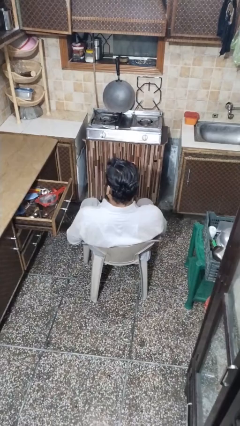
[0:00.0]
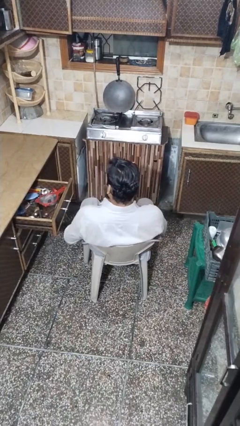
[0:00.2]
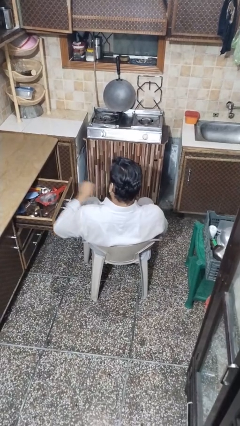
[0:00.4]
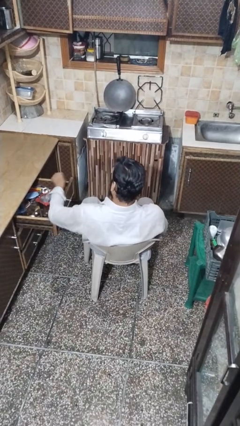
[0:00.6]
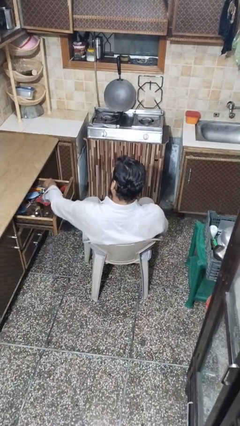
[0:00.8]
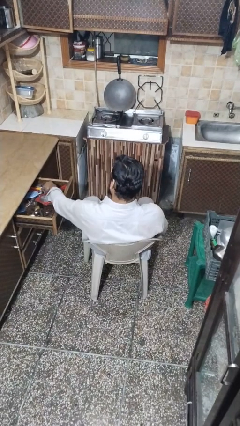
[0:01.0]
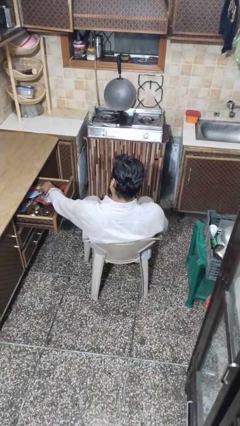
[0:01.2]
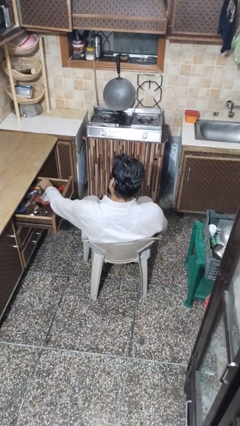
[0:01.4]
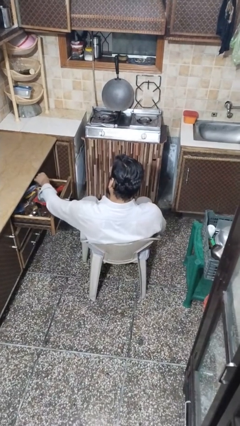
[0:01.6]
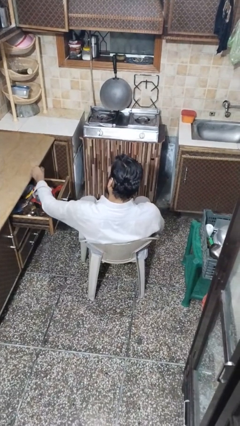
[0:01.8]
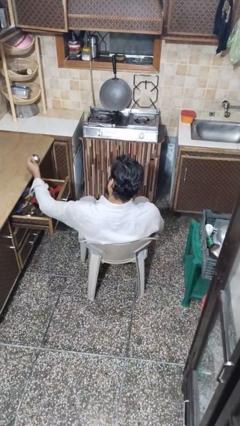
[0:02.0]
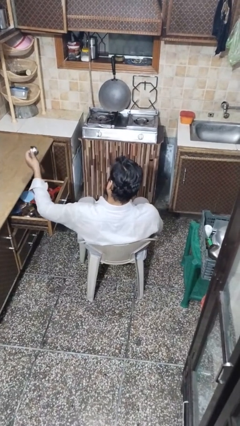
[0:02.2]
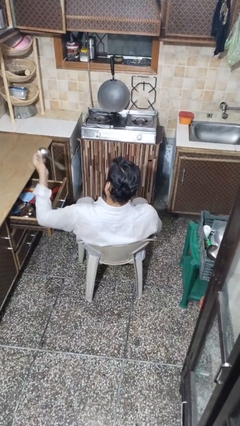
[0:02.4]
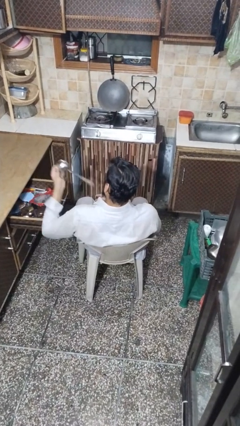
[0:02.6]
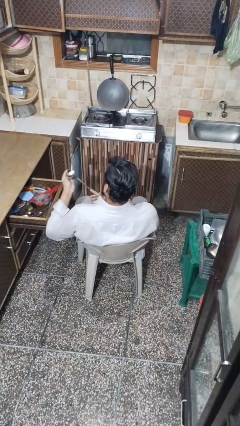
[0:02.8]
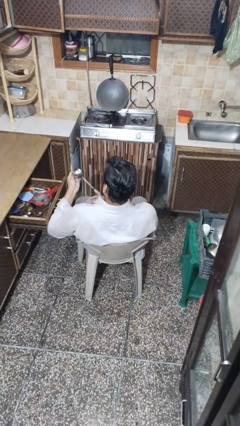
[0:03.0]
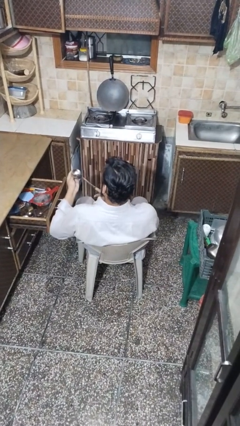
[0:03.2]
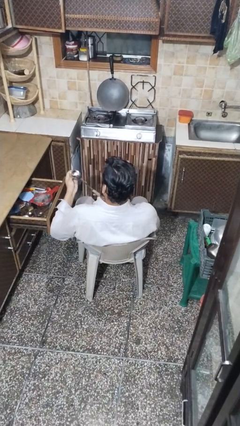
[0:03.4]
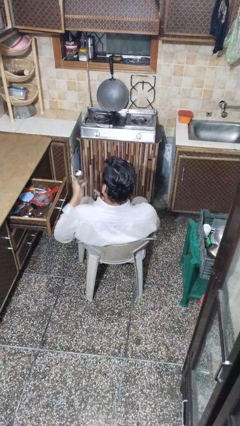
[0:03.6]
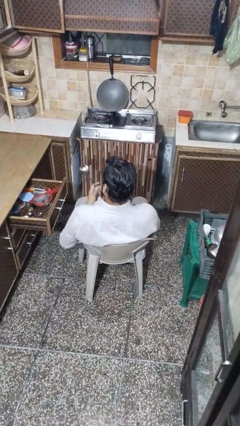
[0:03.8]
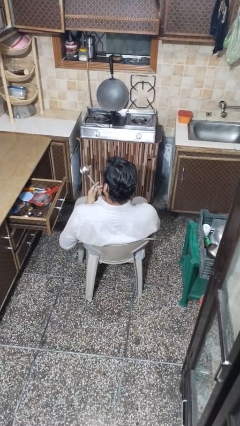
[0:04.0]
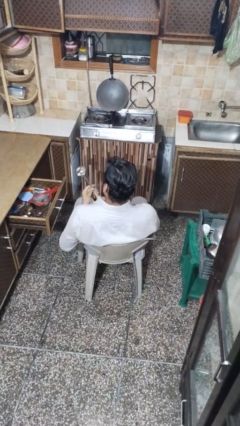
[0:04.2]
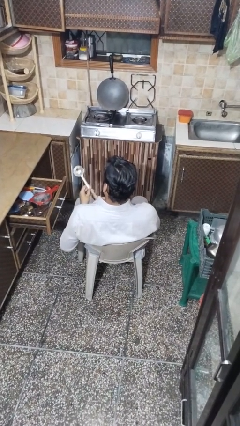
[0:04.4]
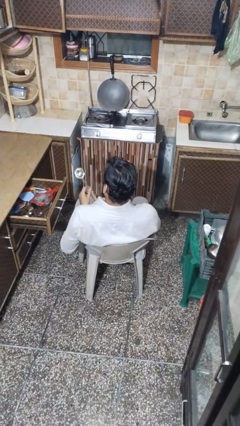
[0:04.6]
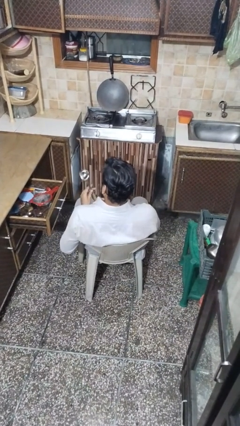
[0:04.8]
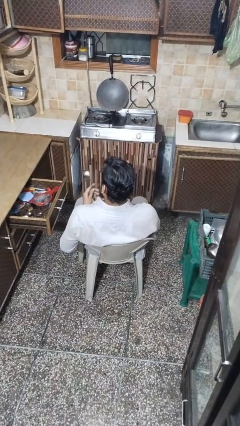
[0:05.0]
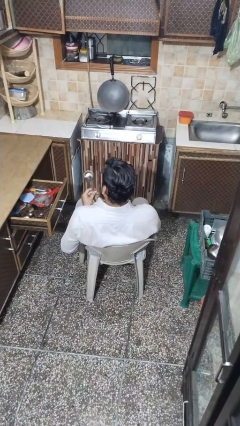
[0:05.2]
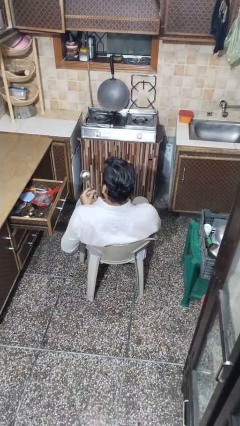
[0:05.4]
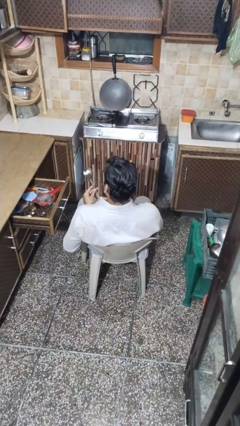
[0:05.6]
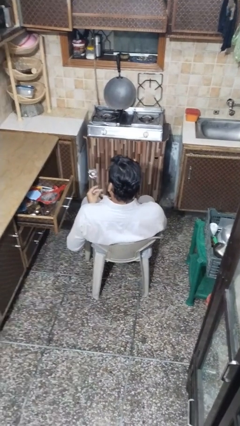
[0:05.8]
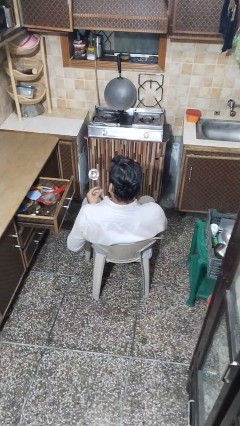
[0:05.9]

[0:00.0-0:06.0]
person takes object from kitchen drawer

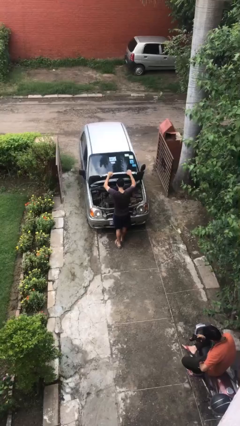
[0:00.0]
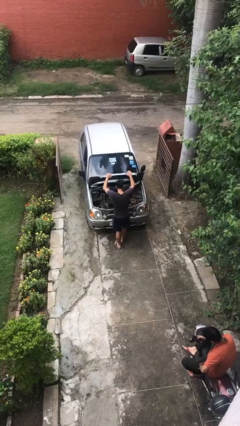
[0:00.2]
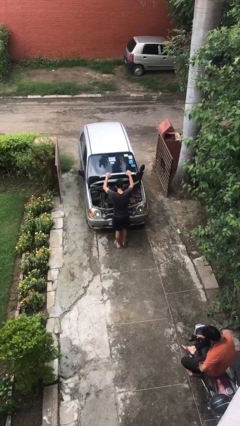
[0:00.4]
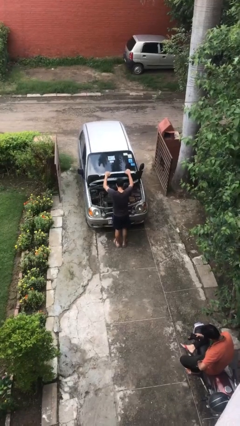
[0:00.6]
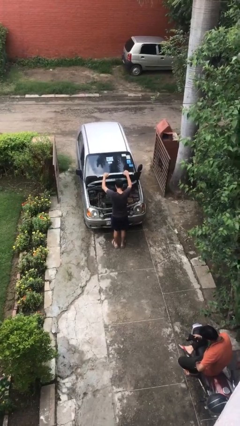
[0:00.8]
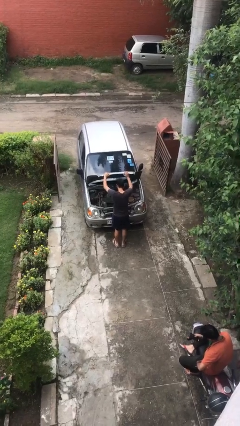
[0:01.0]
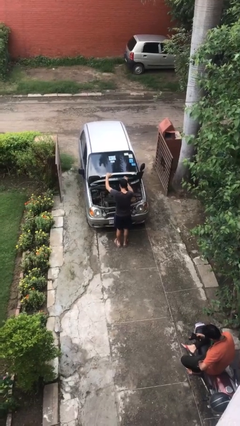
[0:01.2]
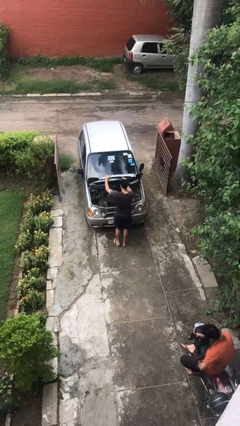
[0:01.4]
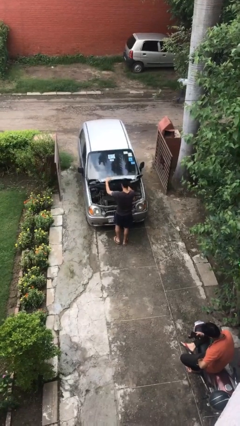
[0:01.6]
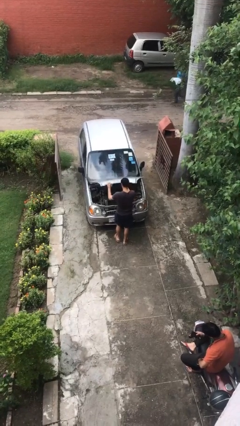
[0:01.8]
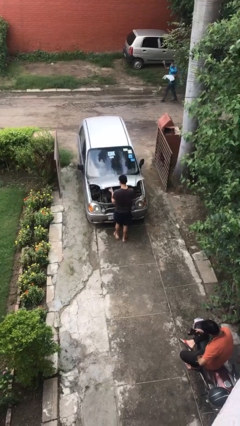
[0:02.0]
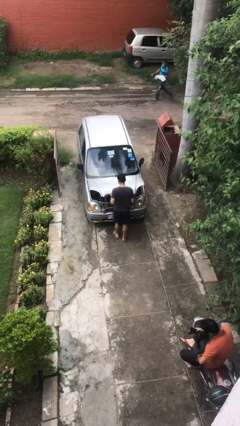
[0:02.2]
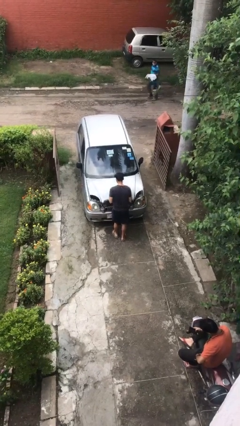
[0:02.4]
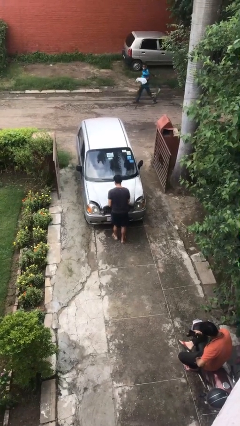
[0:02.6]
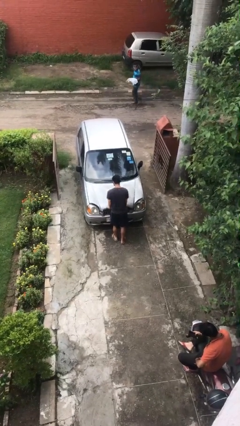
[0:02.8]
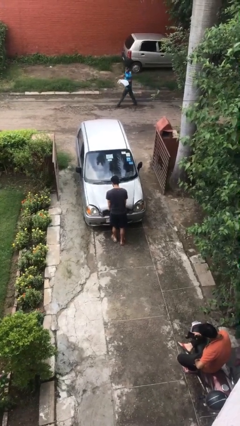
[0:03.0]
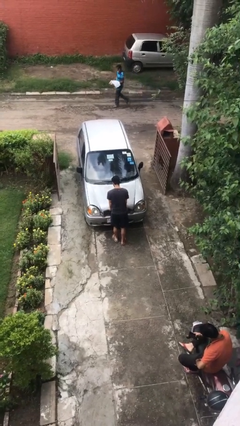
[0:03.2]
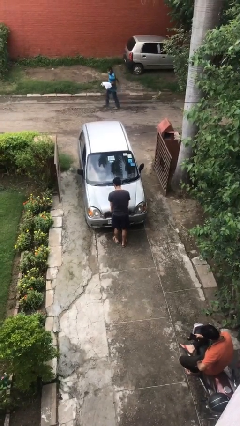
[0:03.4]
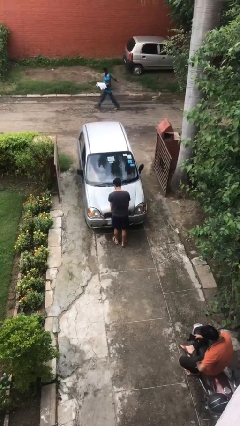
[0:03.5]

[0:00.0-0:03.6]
person closes car hood

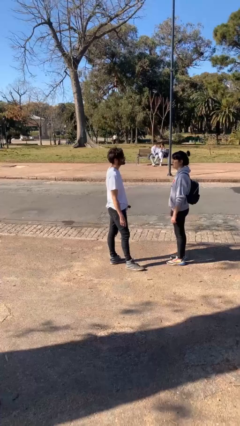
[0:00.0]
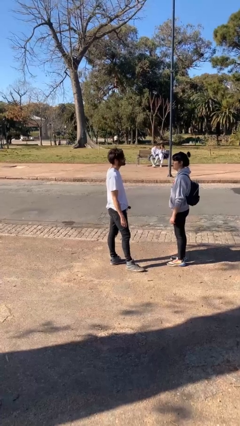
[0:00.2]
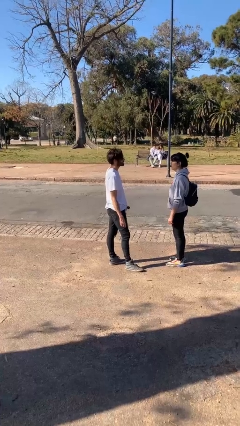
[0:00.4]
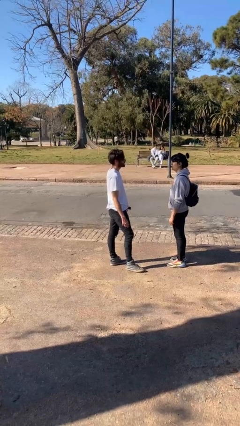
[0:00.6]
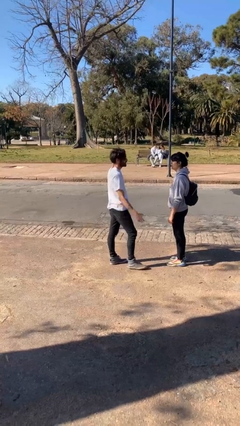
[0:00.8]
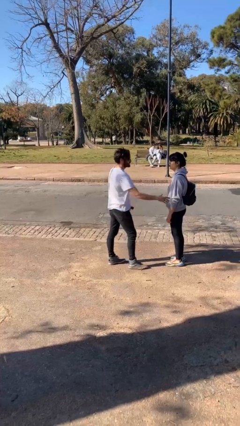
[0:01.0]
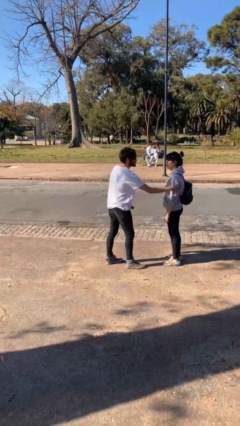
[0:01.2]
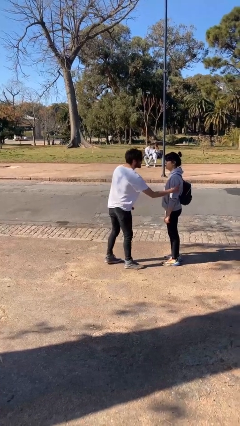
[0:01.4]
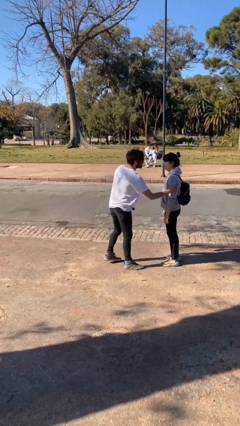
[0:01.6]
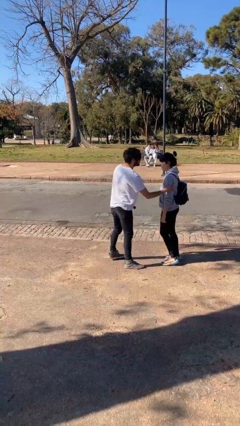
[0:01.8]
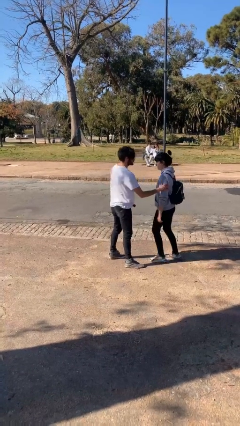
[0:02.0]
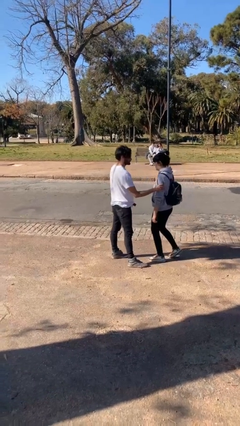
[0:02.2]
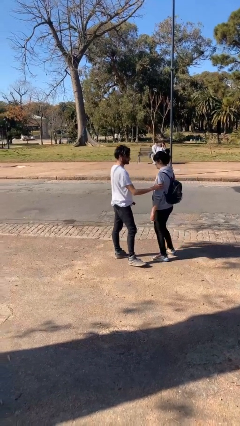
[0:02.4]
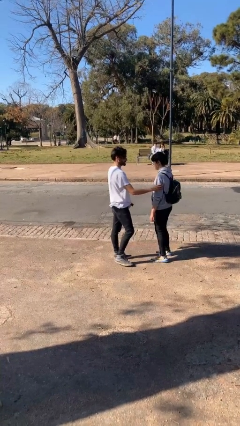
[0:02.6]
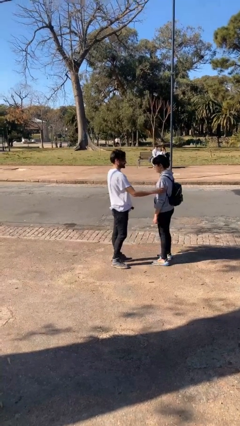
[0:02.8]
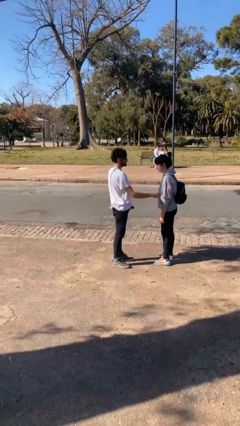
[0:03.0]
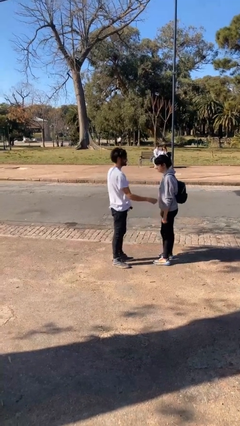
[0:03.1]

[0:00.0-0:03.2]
person grabs person by bicep

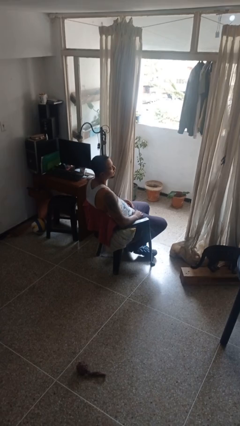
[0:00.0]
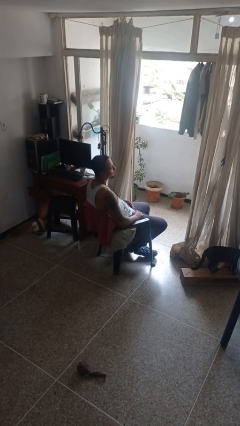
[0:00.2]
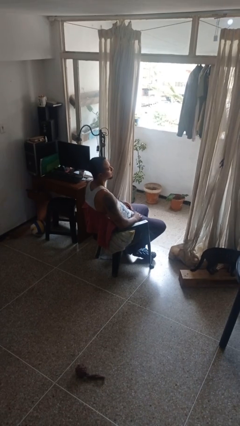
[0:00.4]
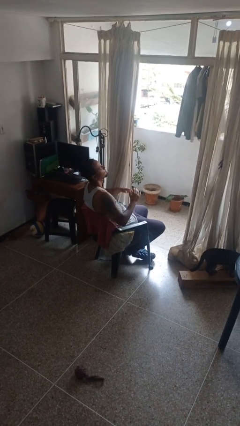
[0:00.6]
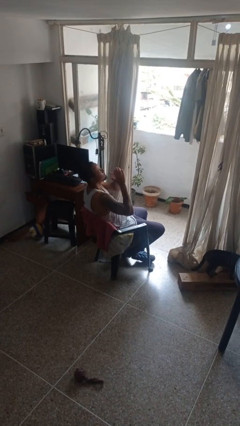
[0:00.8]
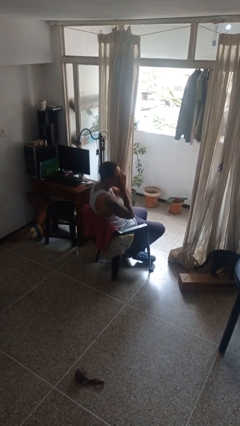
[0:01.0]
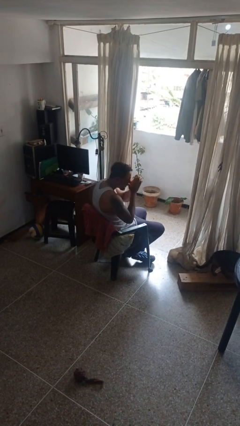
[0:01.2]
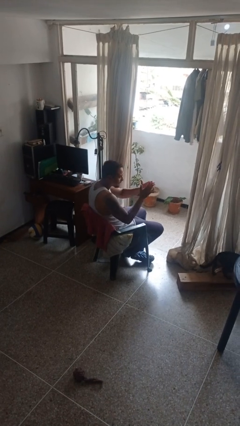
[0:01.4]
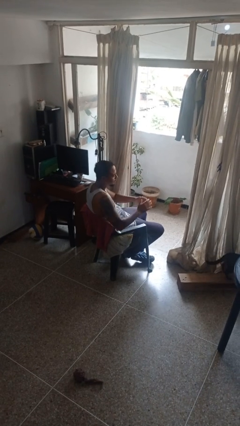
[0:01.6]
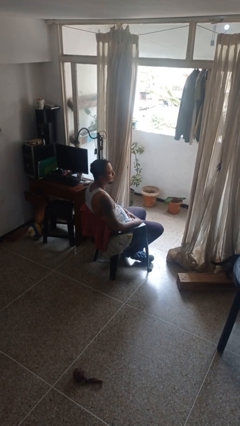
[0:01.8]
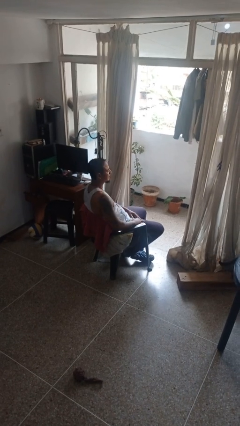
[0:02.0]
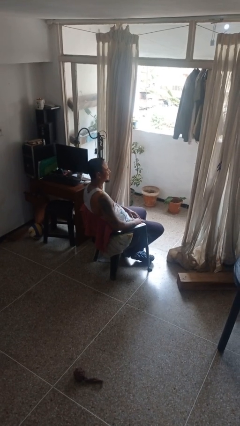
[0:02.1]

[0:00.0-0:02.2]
person sneezes into hand

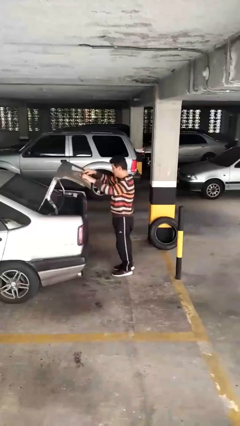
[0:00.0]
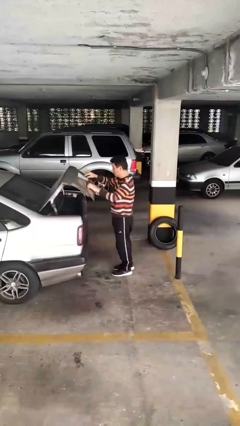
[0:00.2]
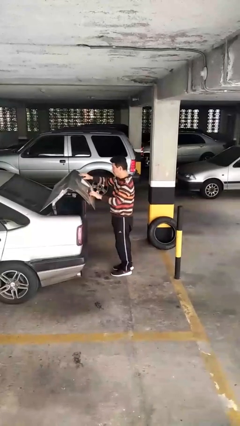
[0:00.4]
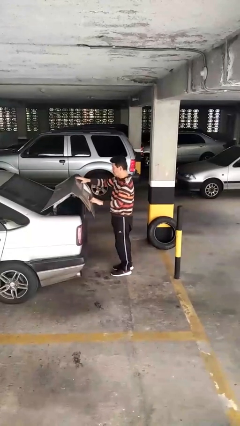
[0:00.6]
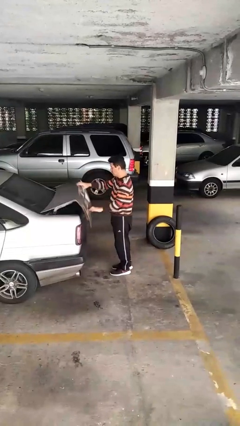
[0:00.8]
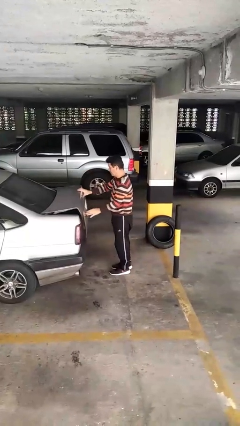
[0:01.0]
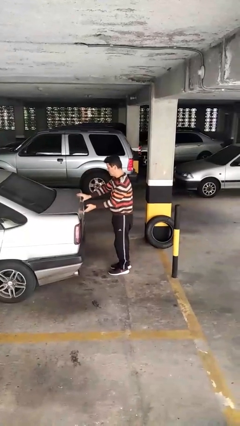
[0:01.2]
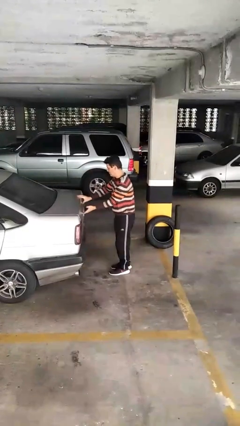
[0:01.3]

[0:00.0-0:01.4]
person closes car trunk

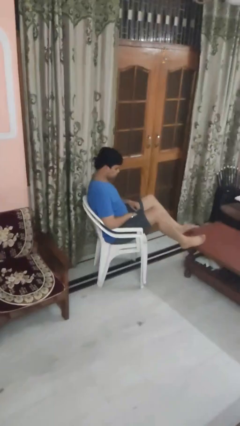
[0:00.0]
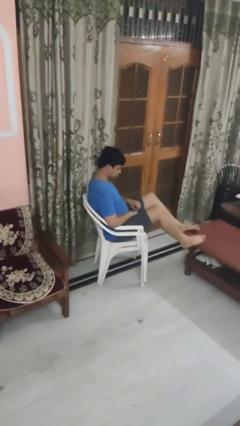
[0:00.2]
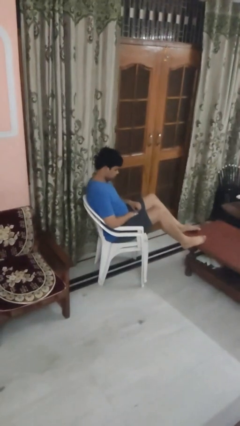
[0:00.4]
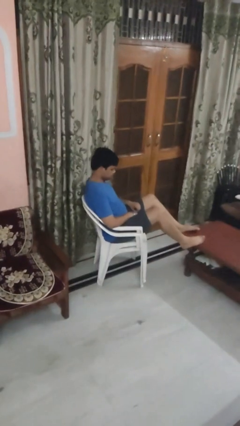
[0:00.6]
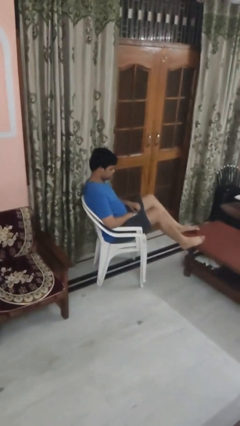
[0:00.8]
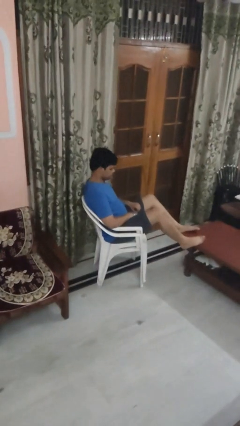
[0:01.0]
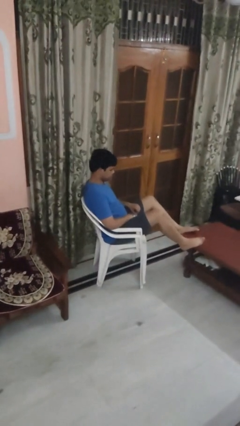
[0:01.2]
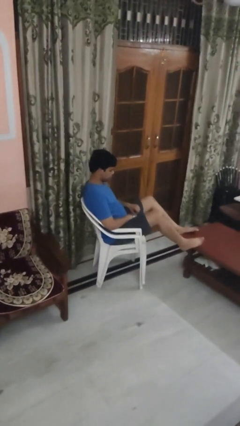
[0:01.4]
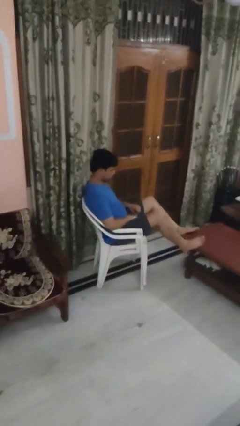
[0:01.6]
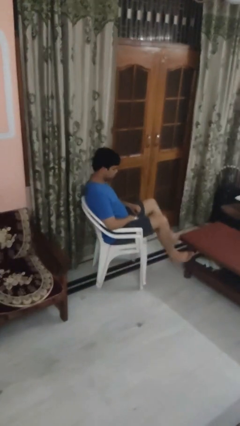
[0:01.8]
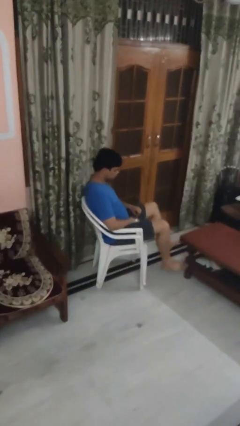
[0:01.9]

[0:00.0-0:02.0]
person puts feet up
